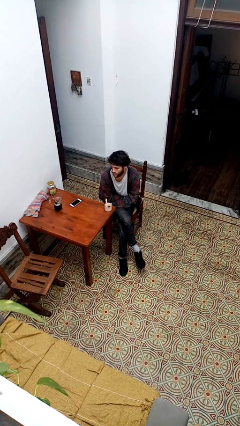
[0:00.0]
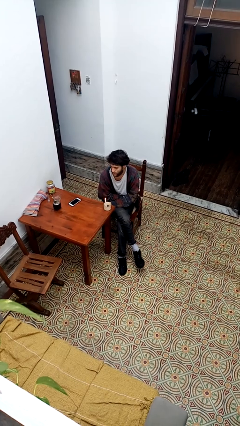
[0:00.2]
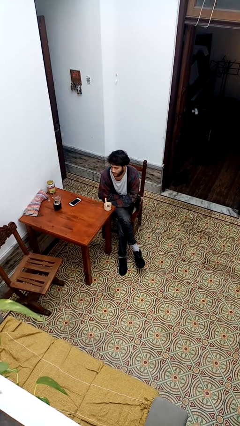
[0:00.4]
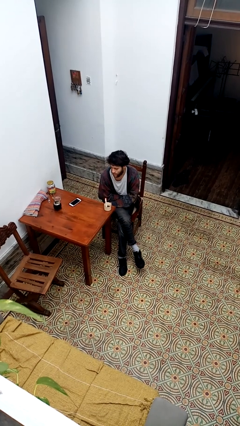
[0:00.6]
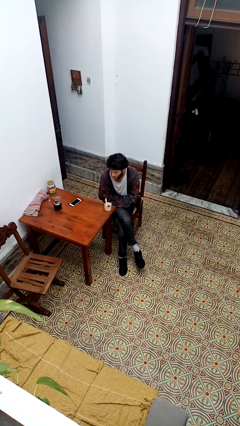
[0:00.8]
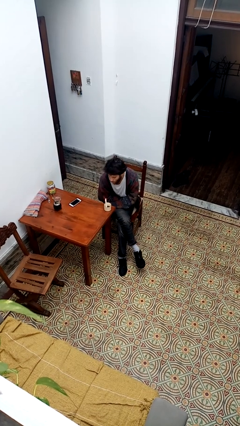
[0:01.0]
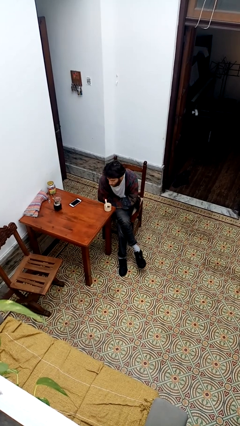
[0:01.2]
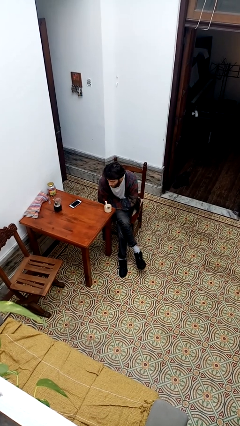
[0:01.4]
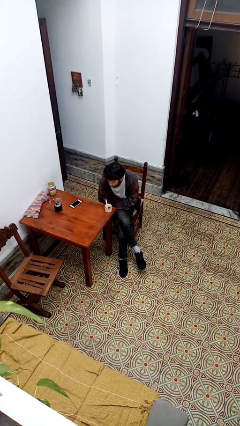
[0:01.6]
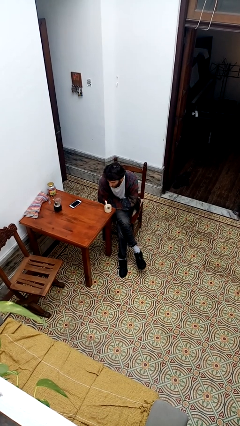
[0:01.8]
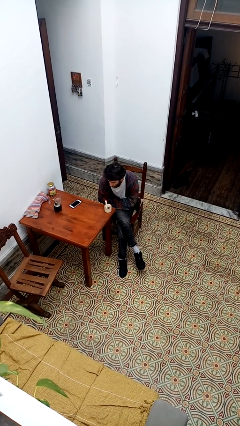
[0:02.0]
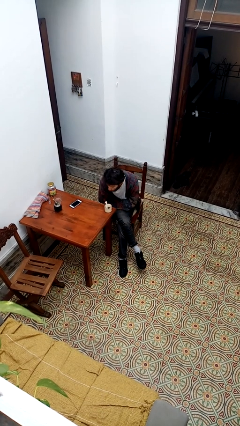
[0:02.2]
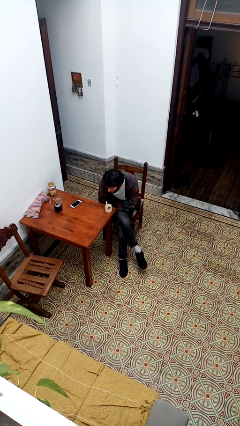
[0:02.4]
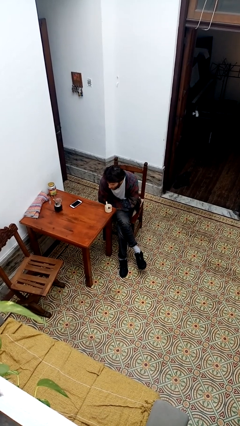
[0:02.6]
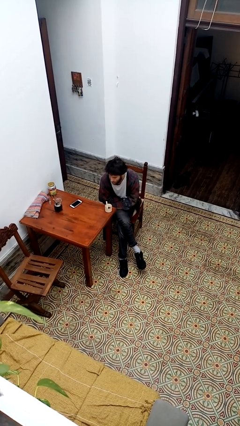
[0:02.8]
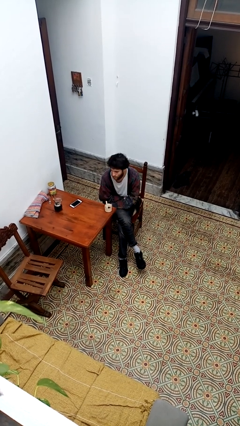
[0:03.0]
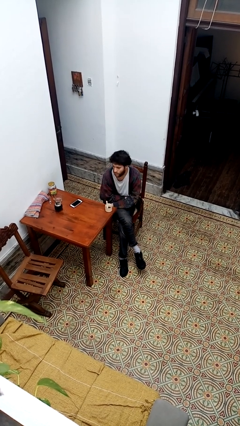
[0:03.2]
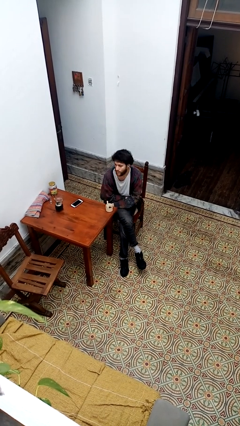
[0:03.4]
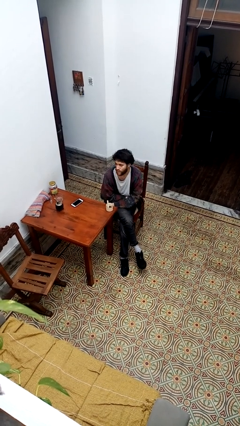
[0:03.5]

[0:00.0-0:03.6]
person extinguishes candle

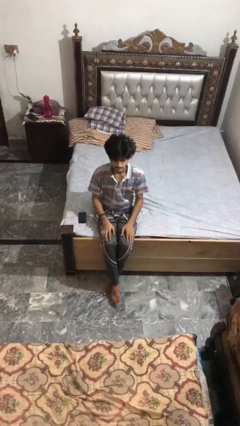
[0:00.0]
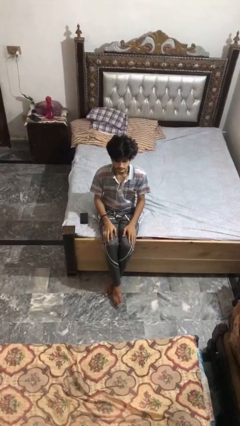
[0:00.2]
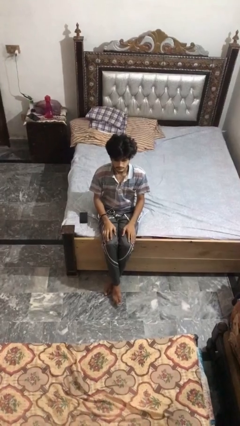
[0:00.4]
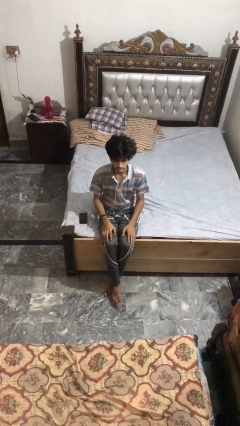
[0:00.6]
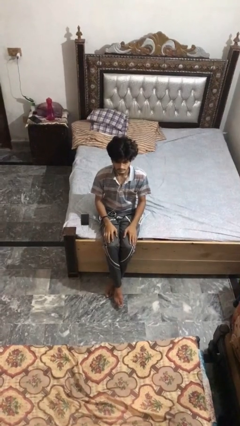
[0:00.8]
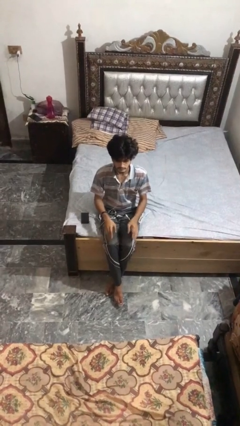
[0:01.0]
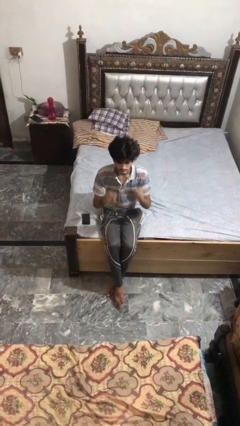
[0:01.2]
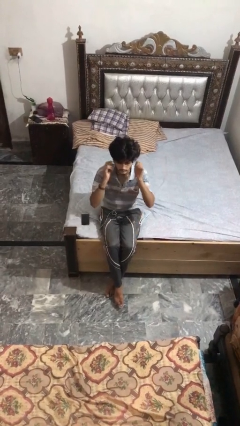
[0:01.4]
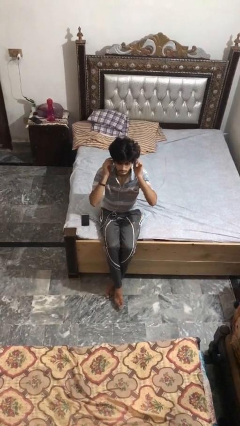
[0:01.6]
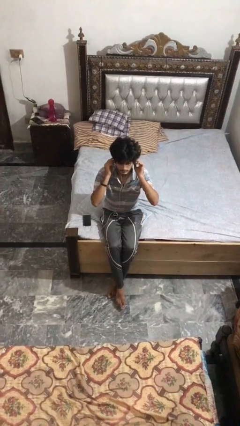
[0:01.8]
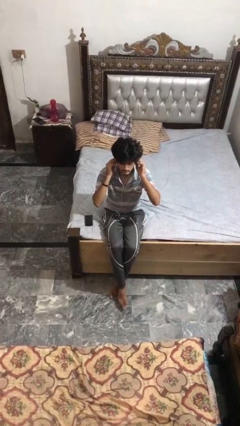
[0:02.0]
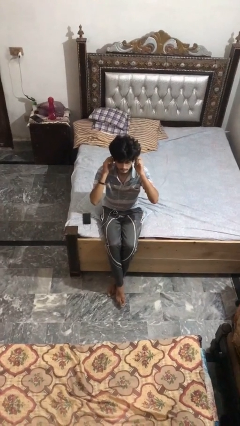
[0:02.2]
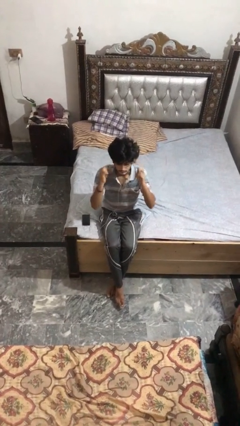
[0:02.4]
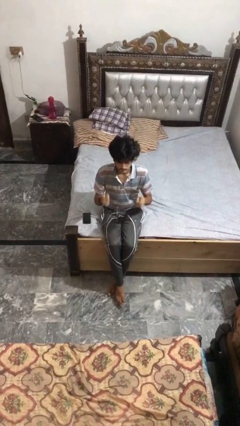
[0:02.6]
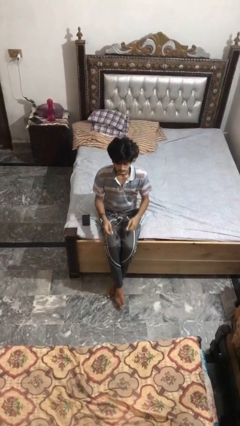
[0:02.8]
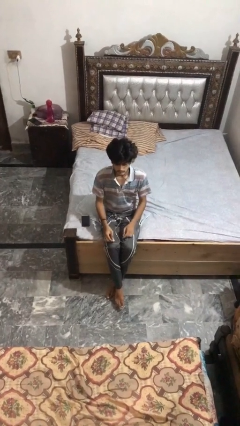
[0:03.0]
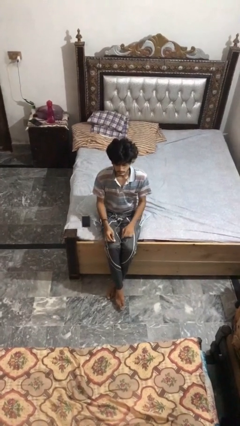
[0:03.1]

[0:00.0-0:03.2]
person takes off headphones

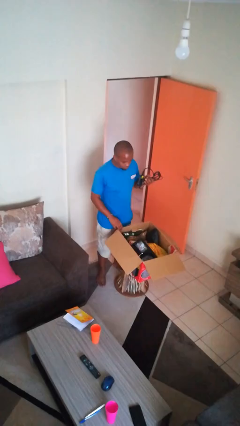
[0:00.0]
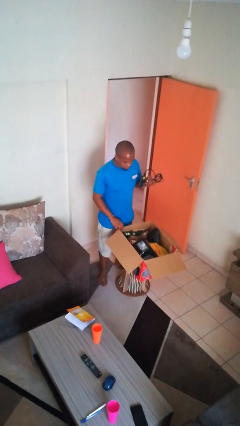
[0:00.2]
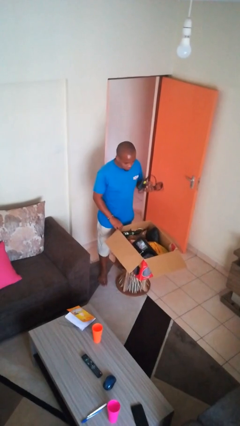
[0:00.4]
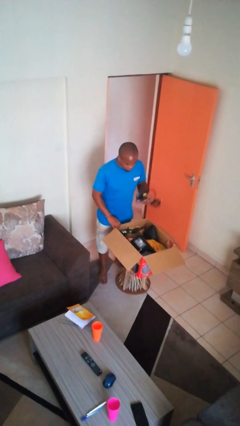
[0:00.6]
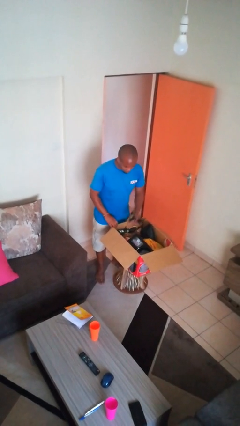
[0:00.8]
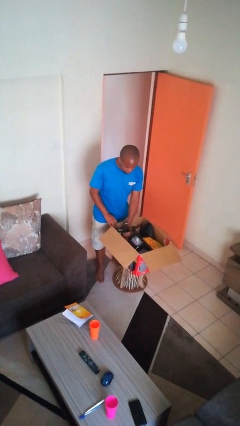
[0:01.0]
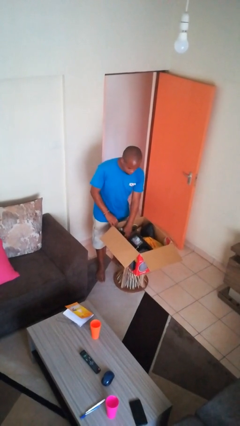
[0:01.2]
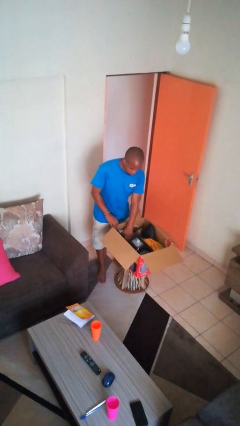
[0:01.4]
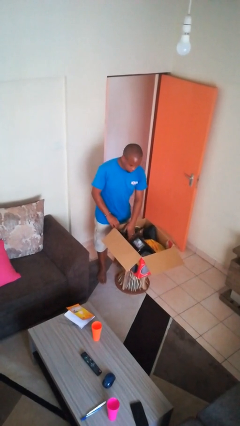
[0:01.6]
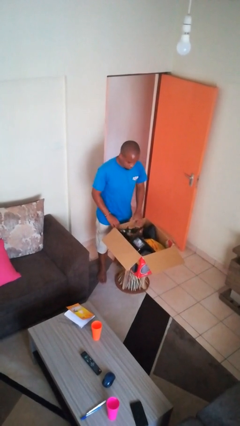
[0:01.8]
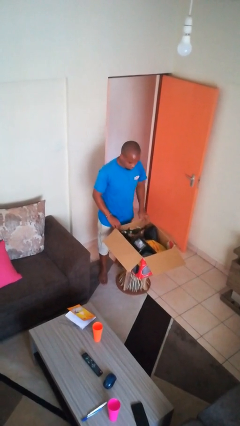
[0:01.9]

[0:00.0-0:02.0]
person puts object into box

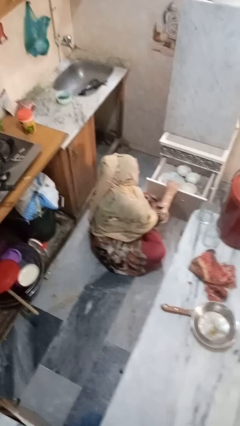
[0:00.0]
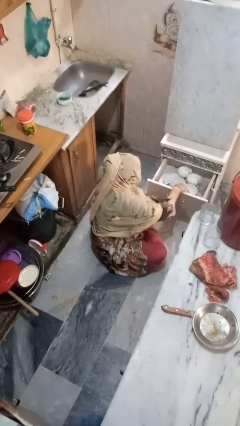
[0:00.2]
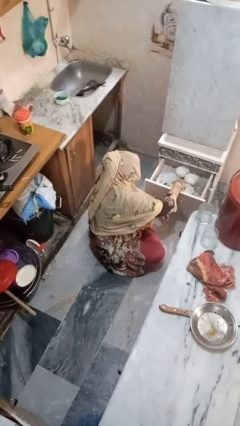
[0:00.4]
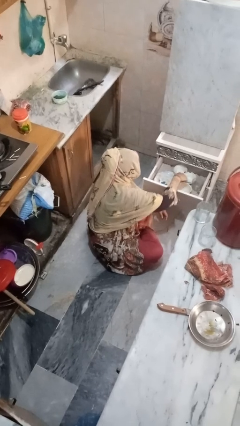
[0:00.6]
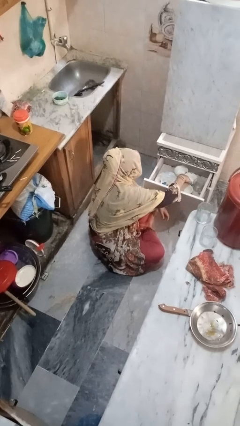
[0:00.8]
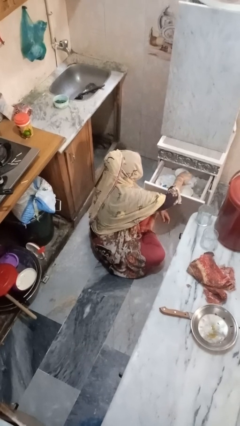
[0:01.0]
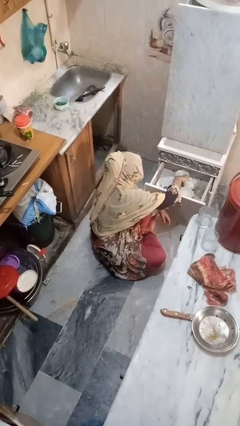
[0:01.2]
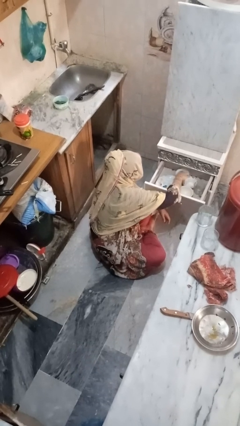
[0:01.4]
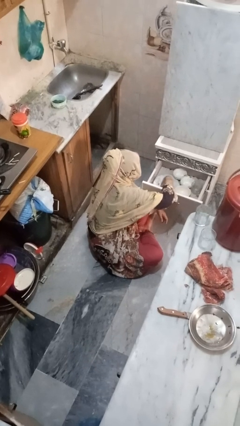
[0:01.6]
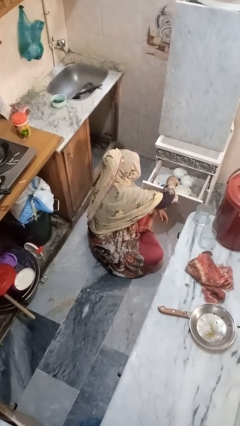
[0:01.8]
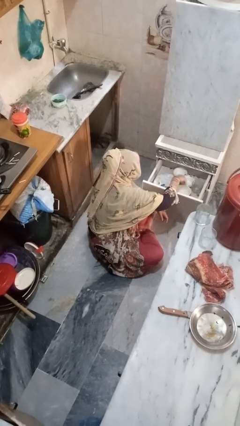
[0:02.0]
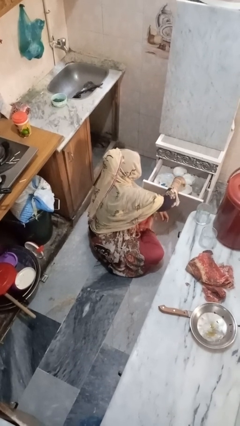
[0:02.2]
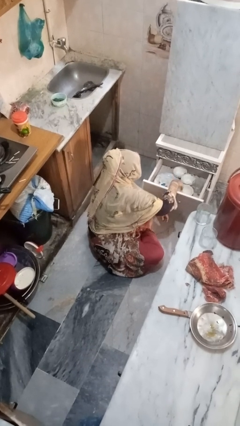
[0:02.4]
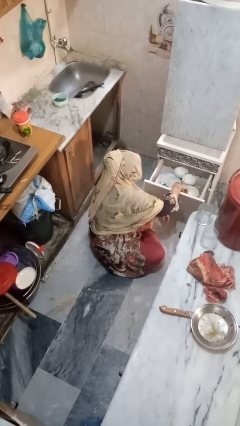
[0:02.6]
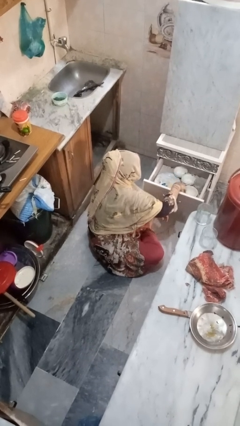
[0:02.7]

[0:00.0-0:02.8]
person searches in kitchen drawer

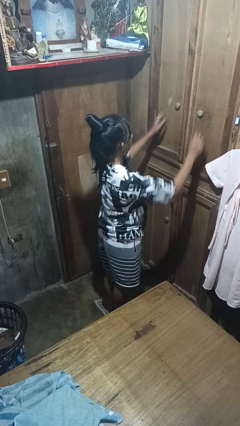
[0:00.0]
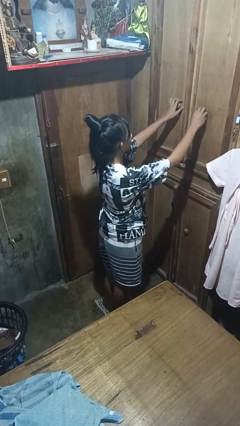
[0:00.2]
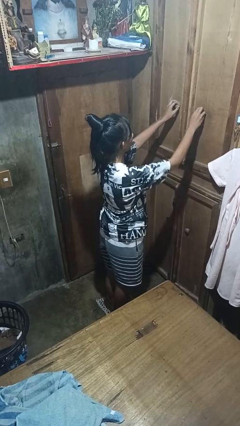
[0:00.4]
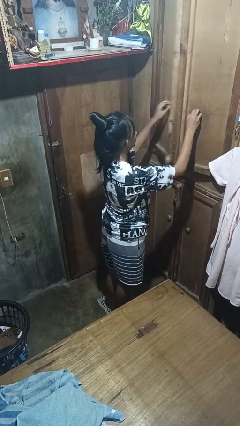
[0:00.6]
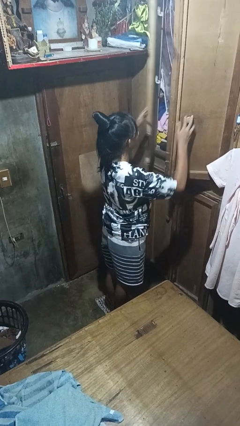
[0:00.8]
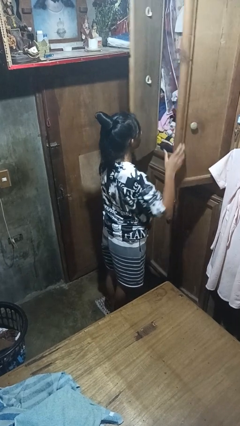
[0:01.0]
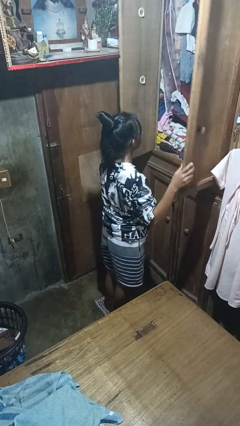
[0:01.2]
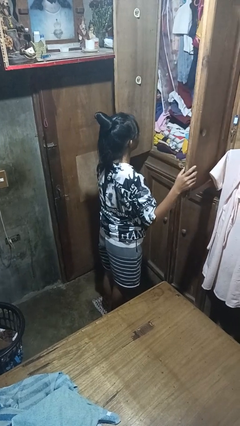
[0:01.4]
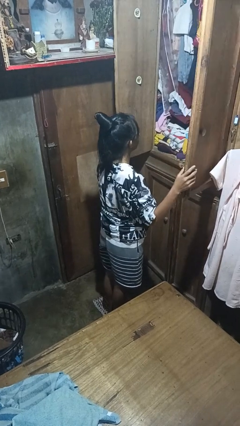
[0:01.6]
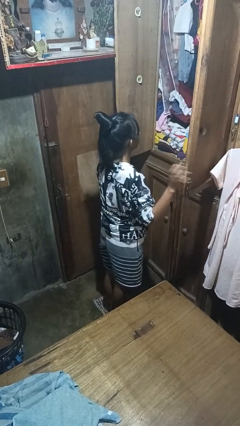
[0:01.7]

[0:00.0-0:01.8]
person opens closet door

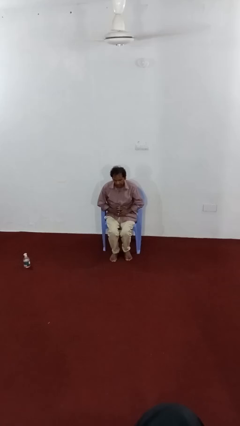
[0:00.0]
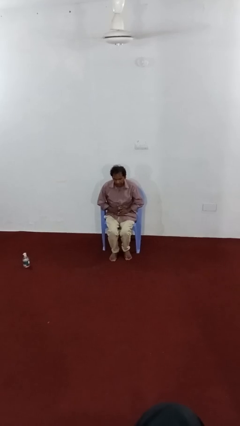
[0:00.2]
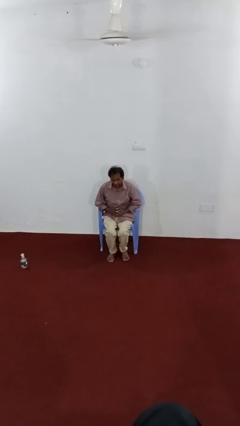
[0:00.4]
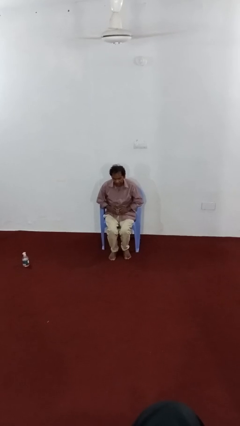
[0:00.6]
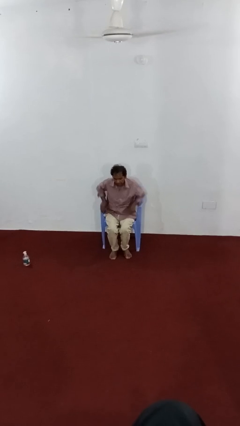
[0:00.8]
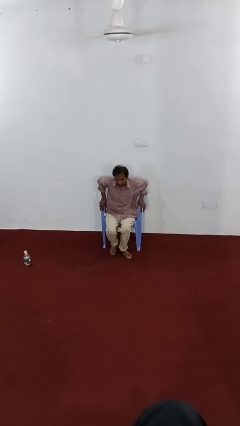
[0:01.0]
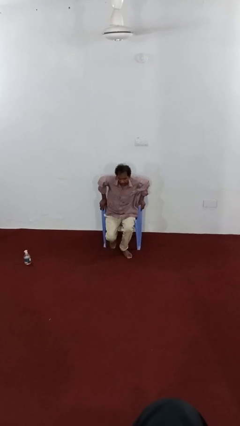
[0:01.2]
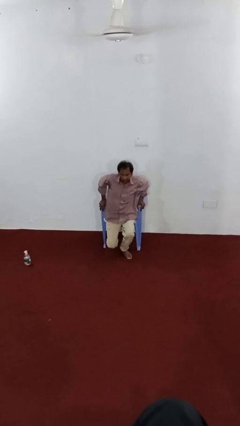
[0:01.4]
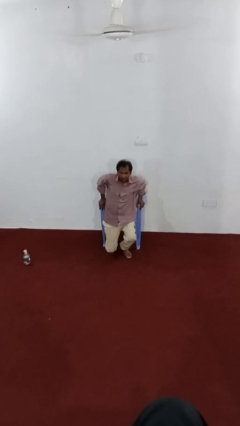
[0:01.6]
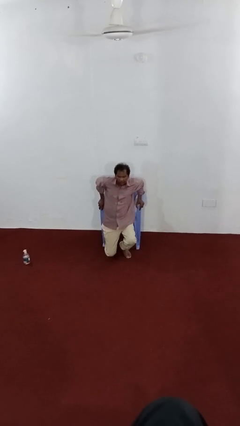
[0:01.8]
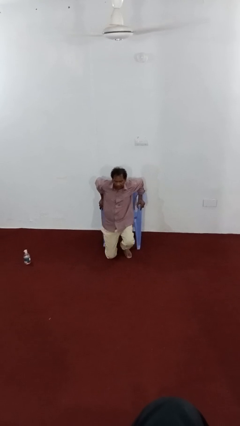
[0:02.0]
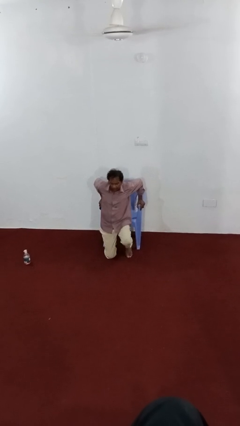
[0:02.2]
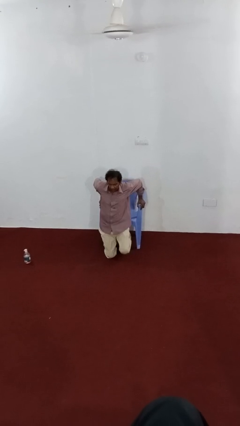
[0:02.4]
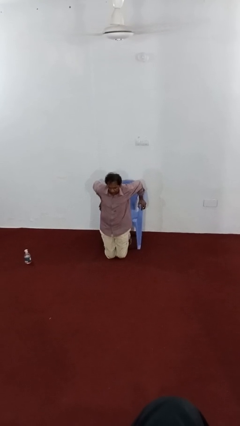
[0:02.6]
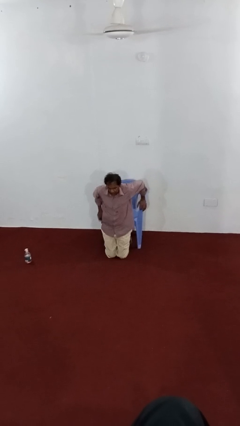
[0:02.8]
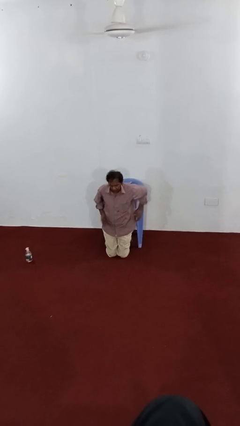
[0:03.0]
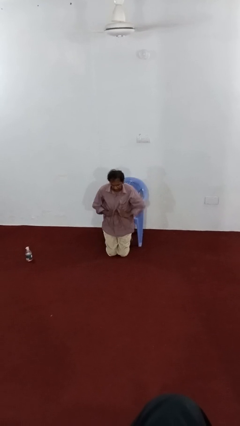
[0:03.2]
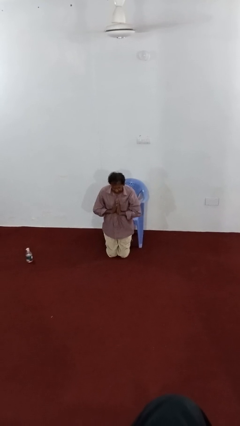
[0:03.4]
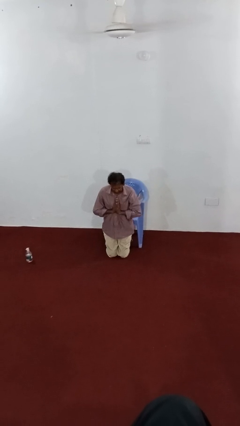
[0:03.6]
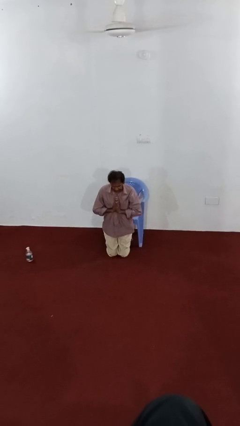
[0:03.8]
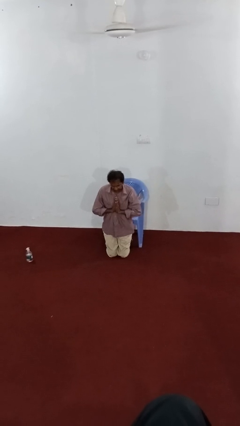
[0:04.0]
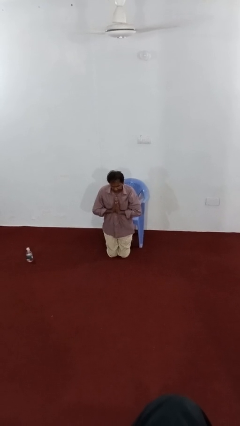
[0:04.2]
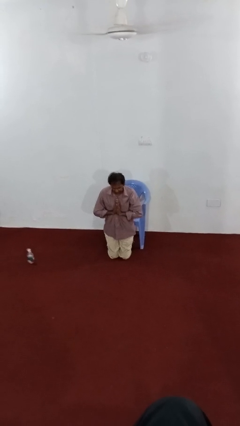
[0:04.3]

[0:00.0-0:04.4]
person prays
